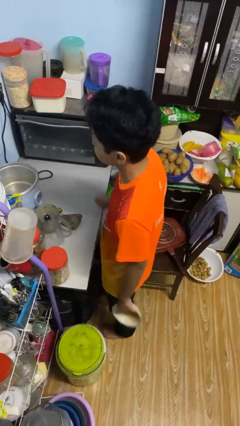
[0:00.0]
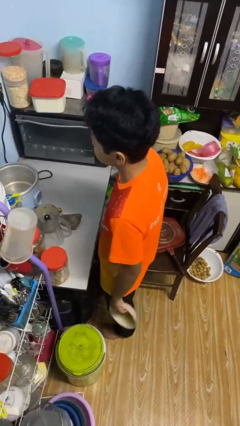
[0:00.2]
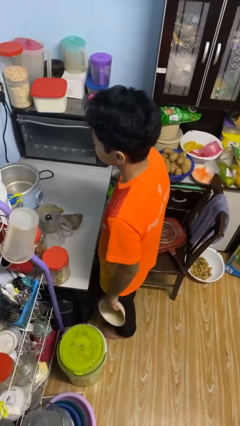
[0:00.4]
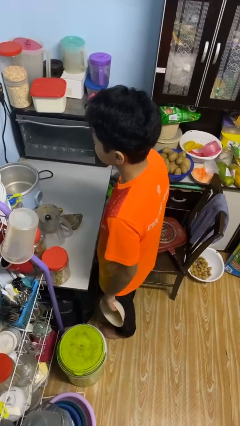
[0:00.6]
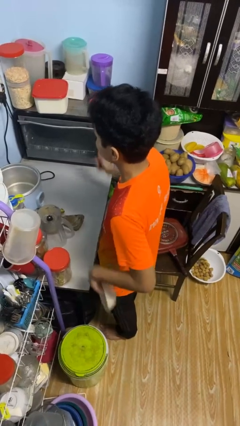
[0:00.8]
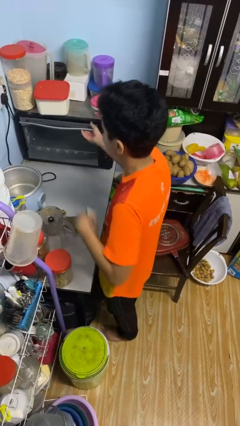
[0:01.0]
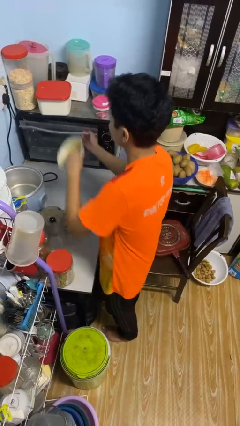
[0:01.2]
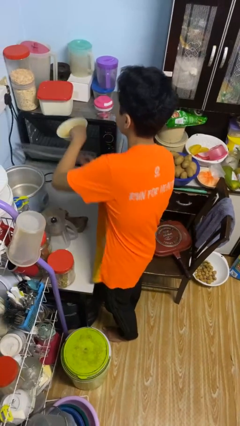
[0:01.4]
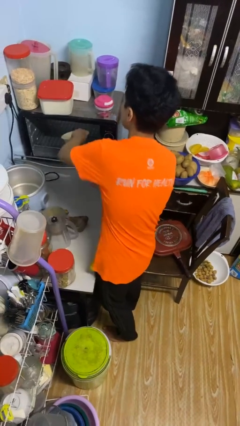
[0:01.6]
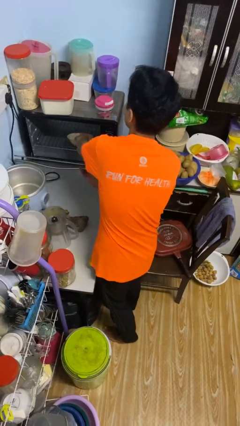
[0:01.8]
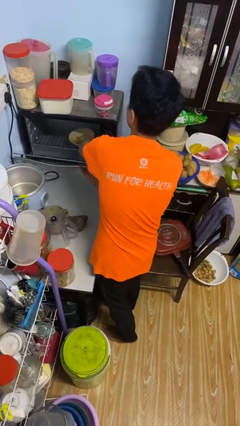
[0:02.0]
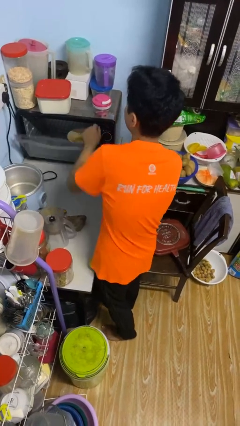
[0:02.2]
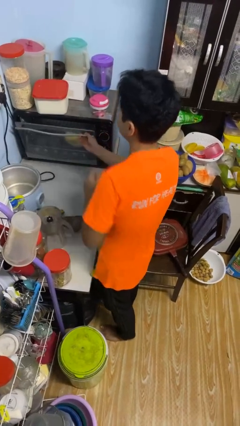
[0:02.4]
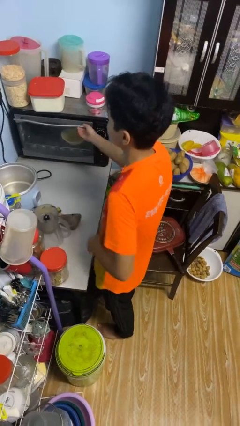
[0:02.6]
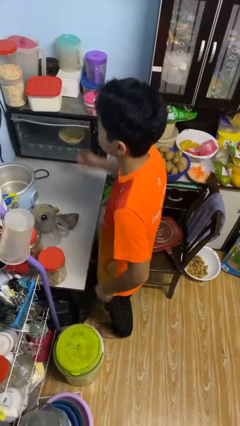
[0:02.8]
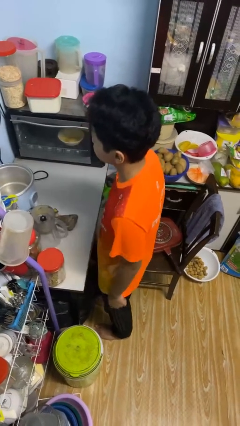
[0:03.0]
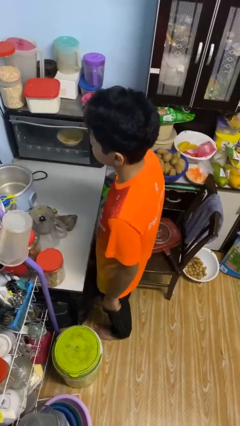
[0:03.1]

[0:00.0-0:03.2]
person puts object into oven

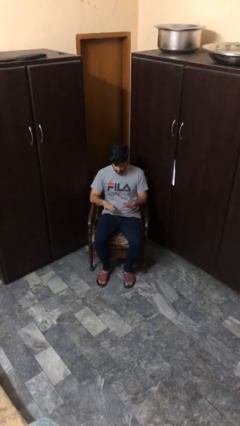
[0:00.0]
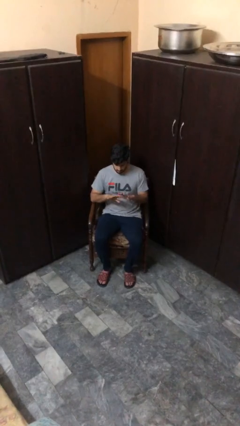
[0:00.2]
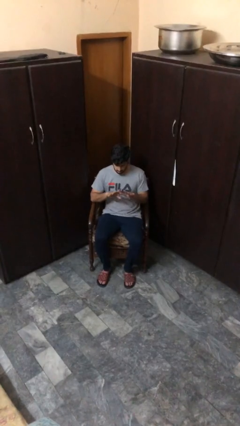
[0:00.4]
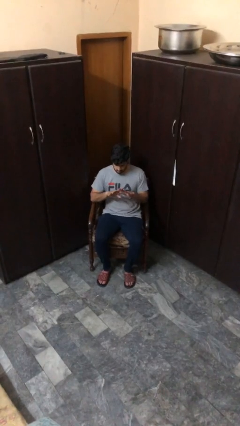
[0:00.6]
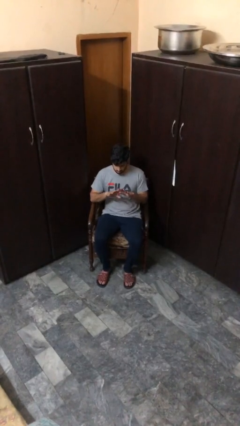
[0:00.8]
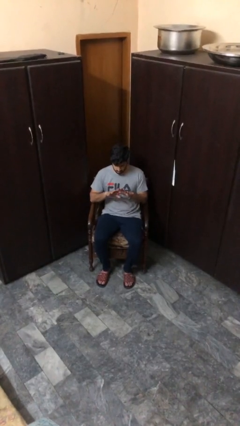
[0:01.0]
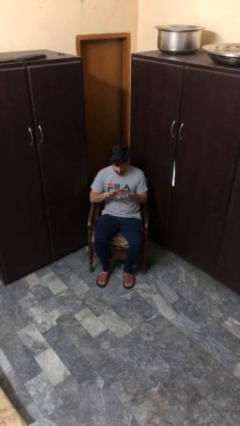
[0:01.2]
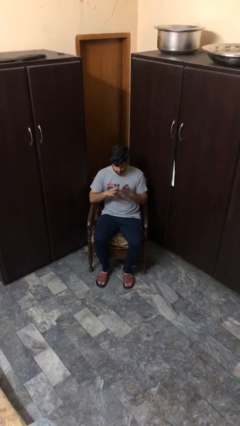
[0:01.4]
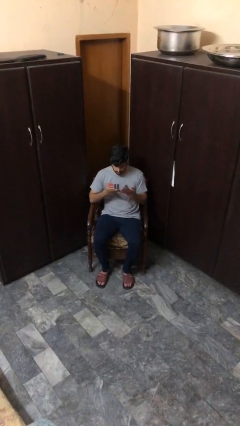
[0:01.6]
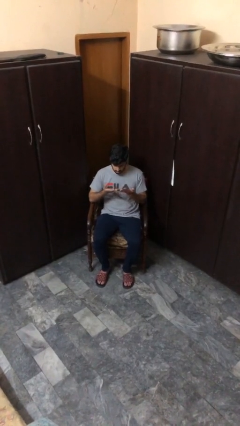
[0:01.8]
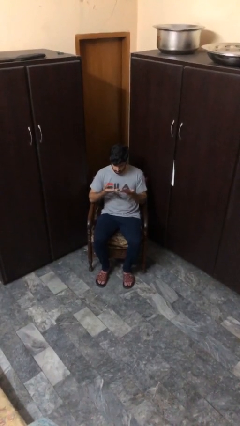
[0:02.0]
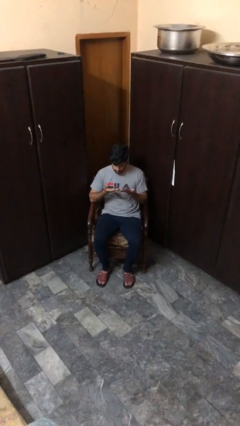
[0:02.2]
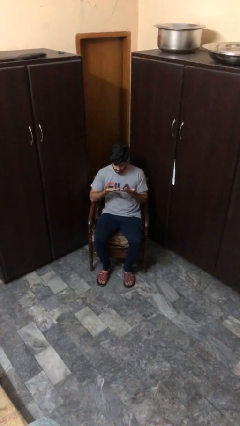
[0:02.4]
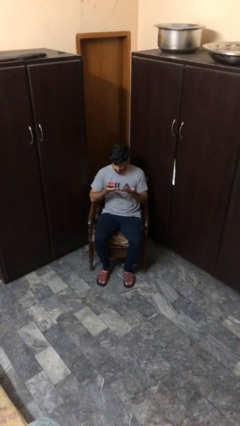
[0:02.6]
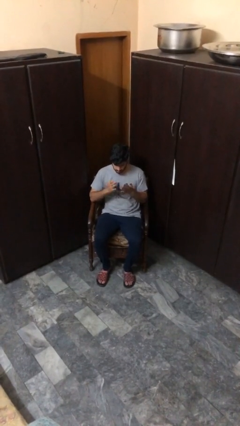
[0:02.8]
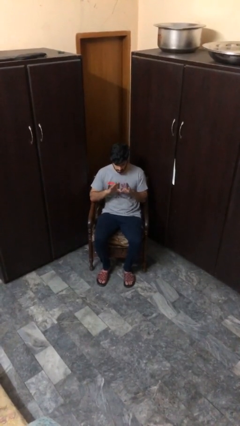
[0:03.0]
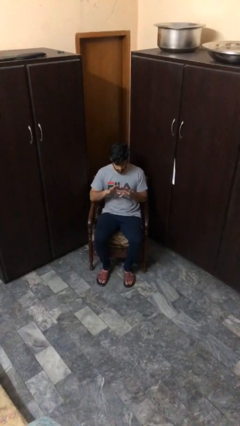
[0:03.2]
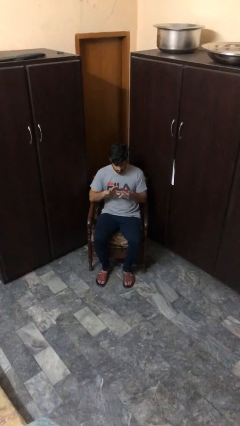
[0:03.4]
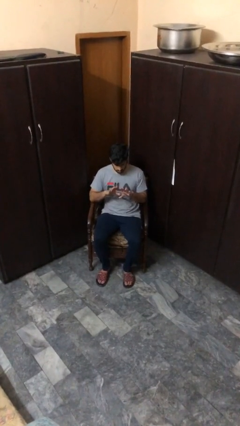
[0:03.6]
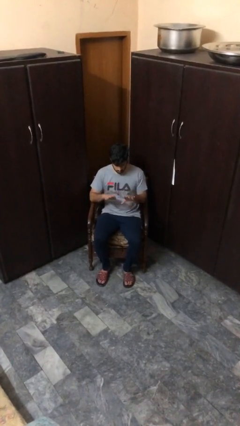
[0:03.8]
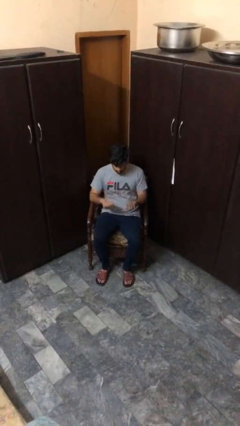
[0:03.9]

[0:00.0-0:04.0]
person looks at hands in lap

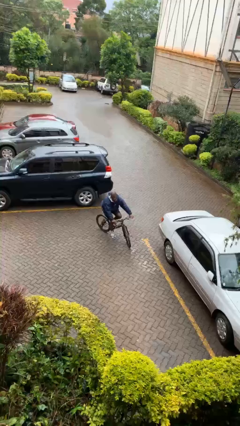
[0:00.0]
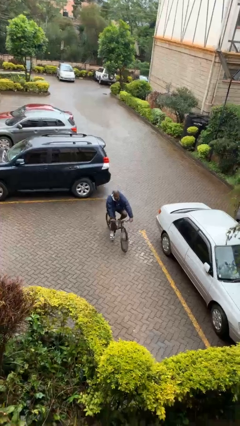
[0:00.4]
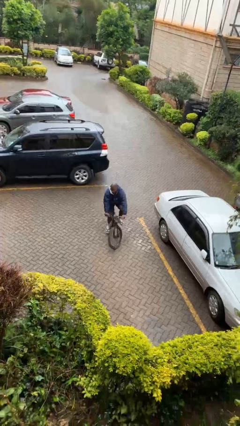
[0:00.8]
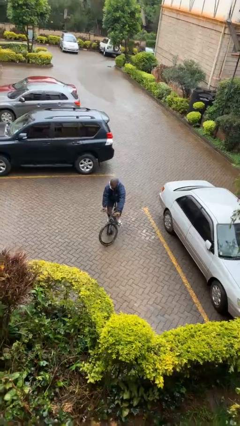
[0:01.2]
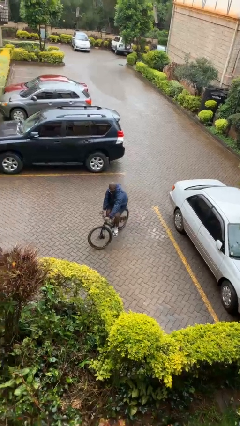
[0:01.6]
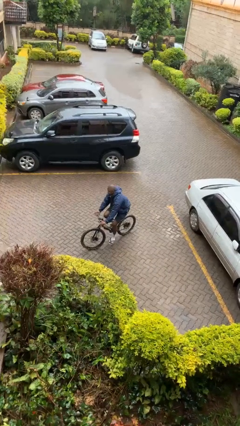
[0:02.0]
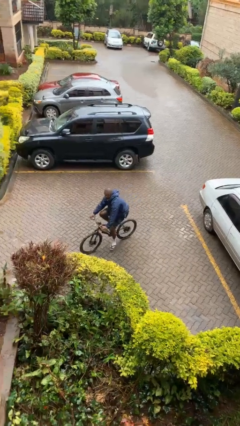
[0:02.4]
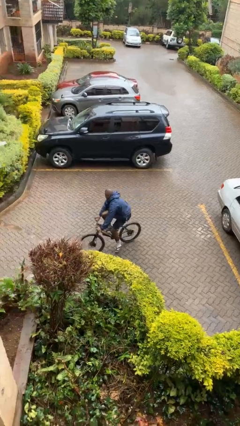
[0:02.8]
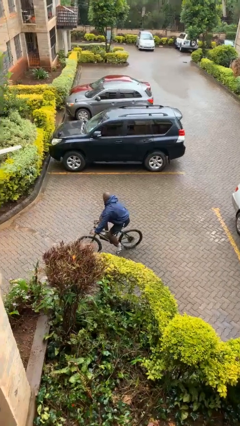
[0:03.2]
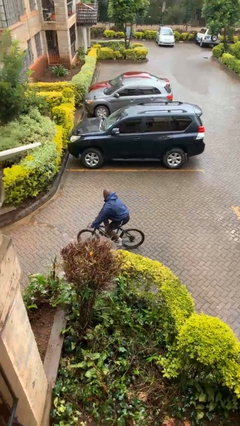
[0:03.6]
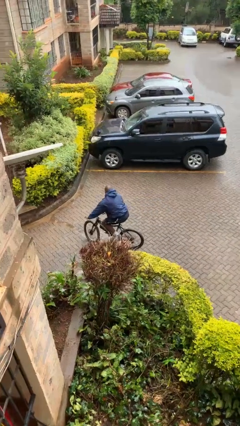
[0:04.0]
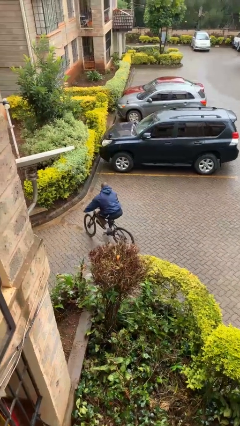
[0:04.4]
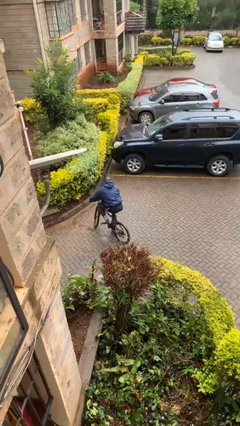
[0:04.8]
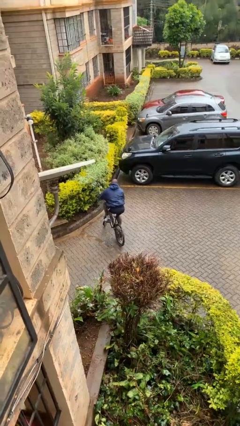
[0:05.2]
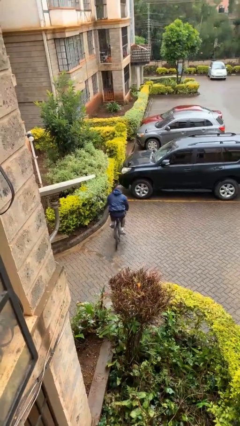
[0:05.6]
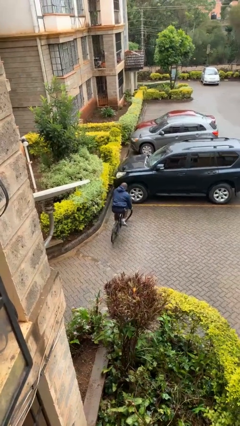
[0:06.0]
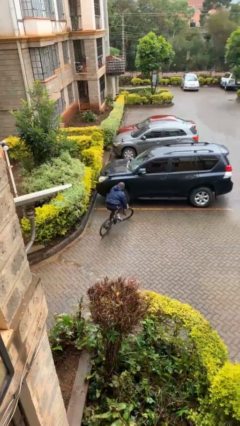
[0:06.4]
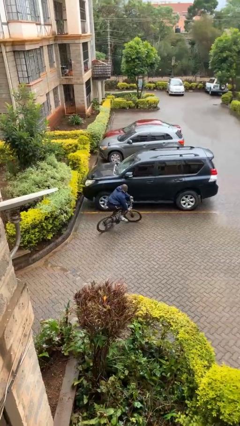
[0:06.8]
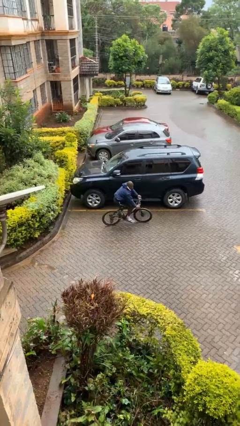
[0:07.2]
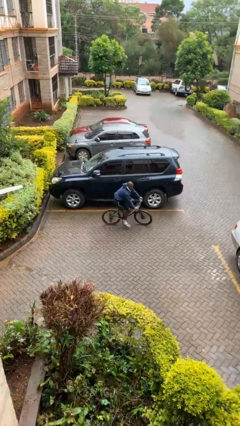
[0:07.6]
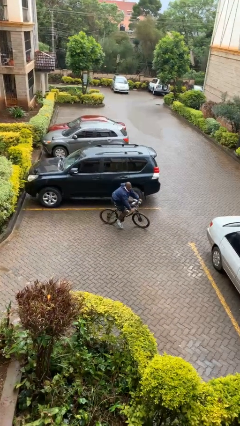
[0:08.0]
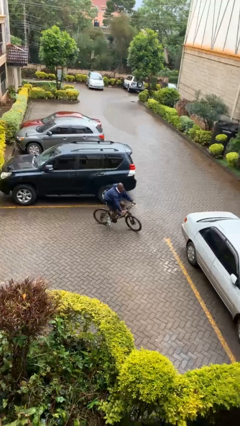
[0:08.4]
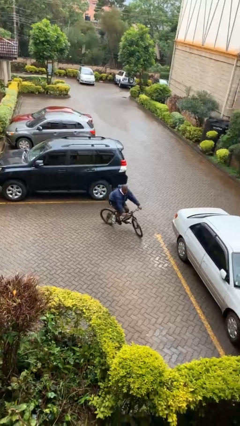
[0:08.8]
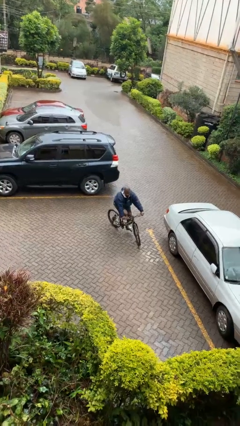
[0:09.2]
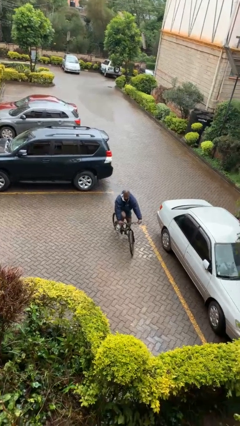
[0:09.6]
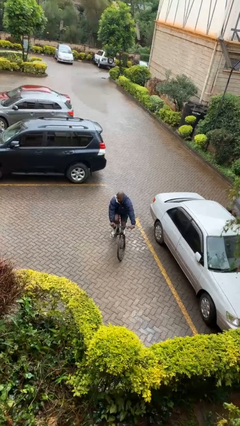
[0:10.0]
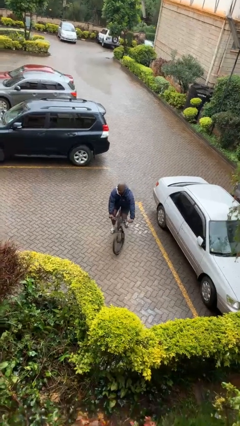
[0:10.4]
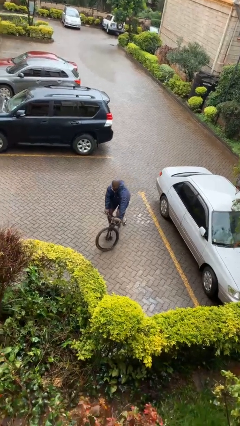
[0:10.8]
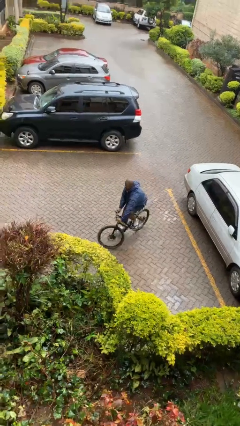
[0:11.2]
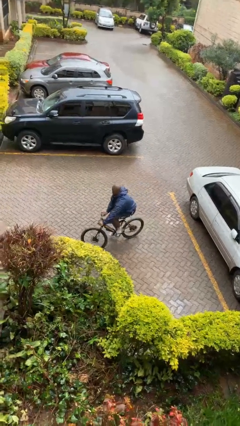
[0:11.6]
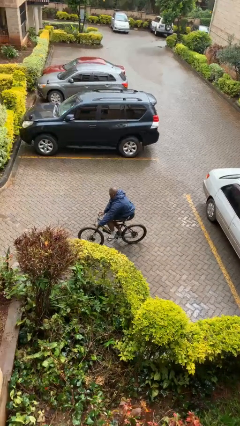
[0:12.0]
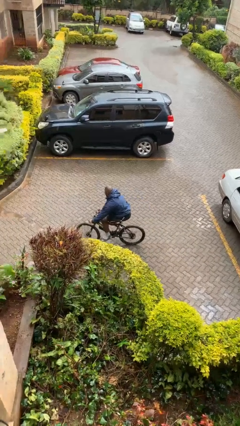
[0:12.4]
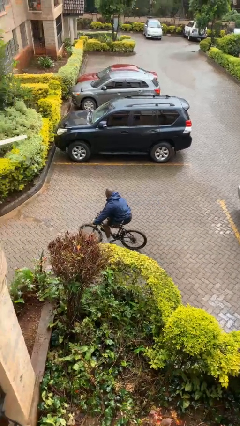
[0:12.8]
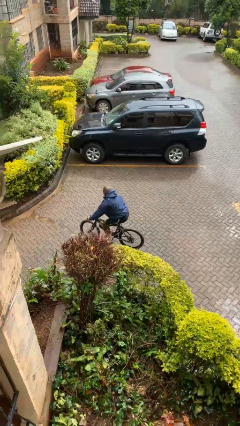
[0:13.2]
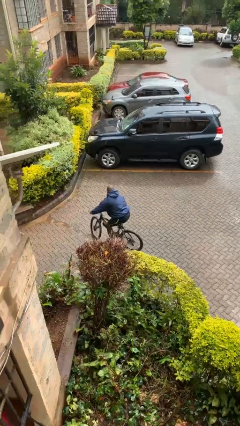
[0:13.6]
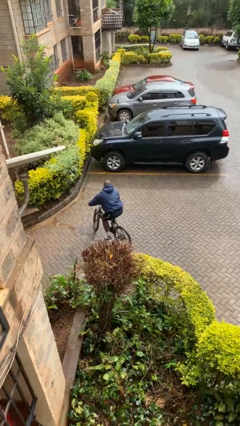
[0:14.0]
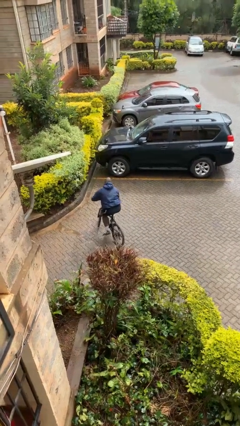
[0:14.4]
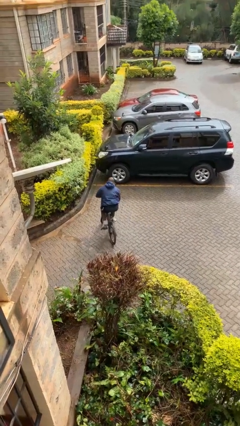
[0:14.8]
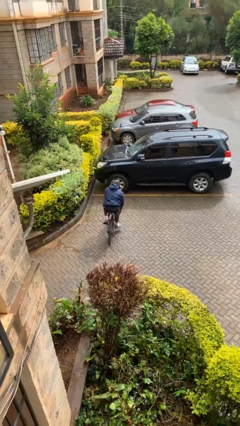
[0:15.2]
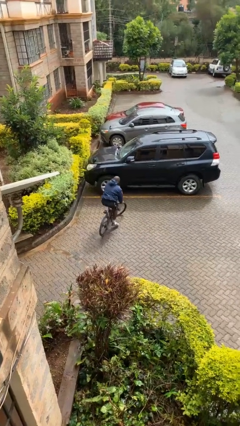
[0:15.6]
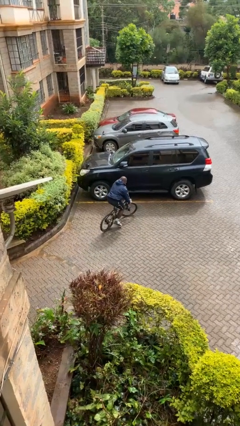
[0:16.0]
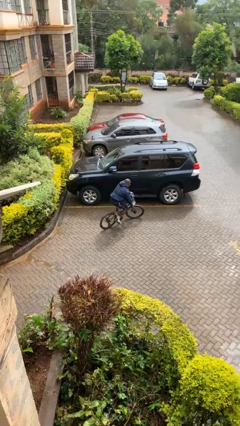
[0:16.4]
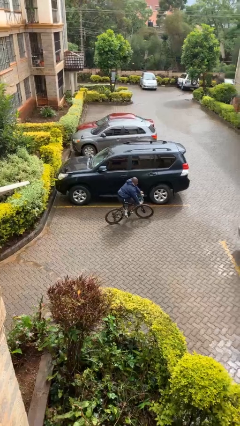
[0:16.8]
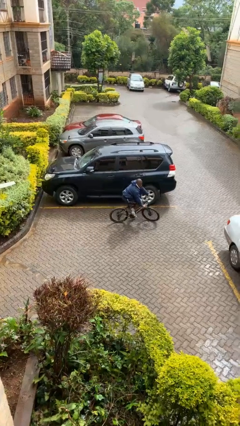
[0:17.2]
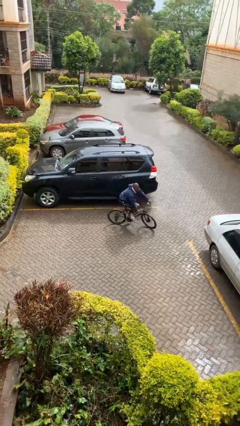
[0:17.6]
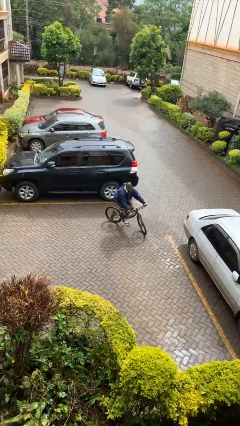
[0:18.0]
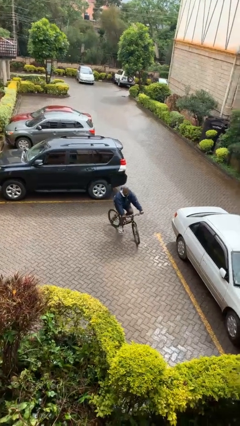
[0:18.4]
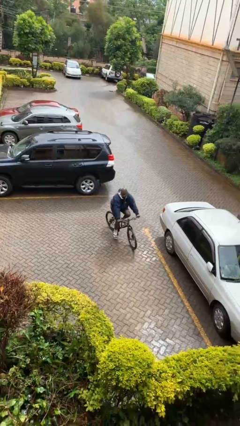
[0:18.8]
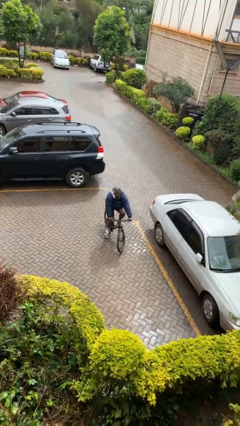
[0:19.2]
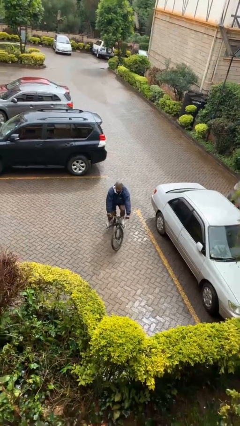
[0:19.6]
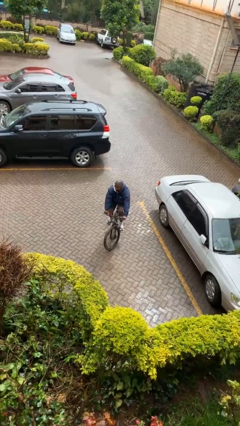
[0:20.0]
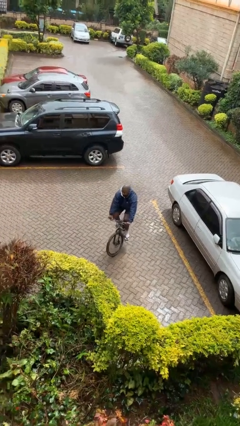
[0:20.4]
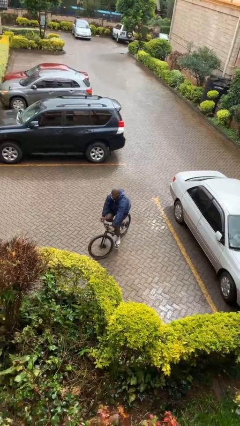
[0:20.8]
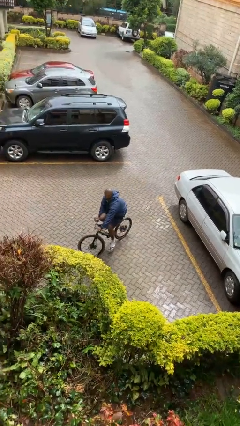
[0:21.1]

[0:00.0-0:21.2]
person rides bicycle

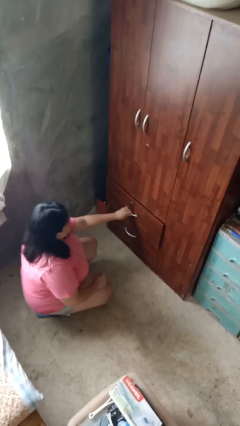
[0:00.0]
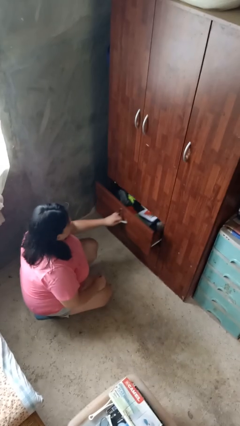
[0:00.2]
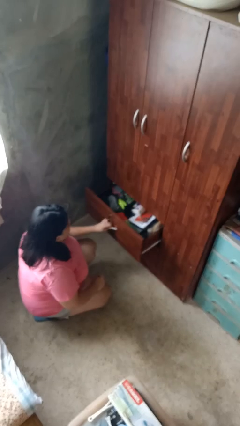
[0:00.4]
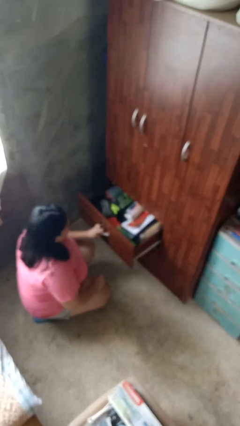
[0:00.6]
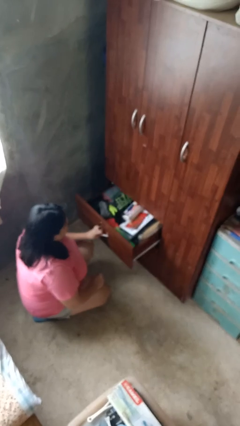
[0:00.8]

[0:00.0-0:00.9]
person opens dresser drawer
